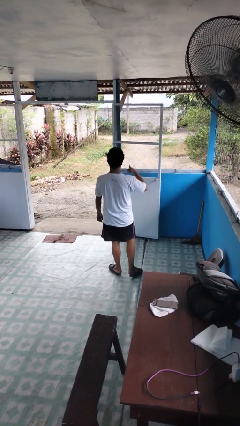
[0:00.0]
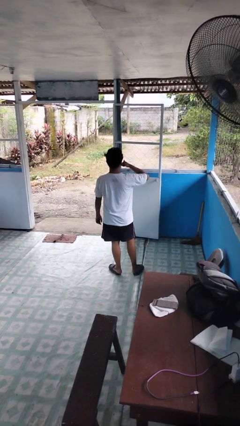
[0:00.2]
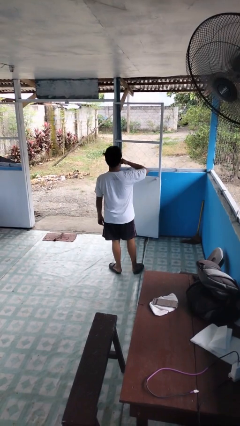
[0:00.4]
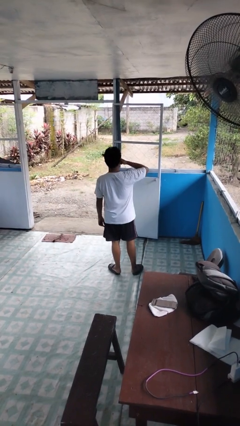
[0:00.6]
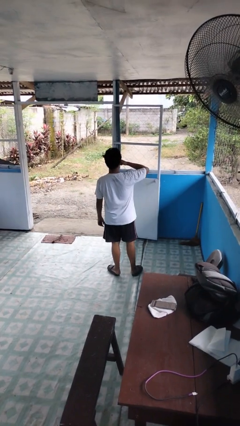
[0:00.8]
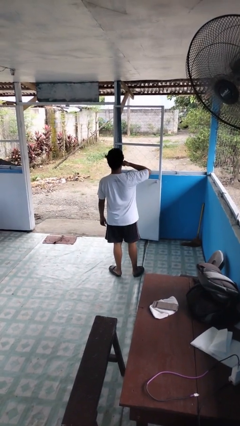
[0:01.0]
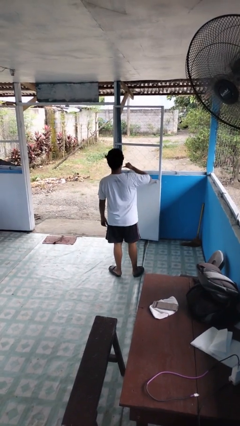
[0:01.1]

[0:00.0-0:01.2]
person gestures call me

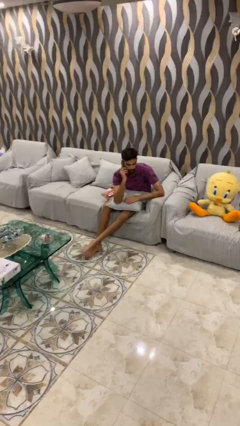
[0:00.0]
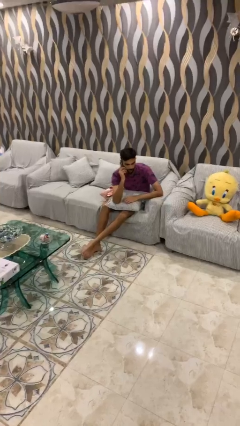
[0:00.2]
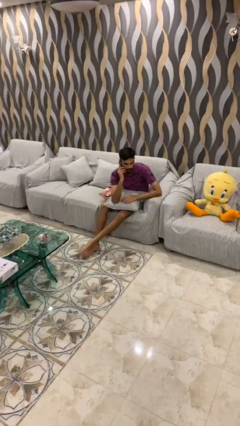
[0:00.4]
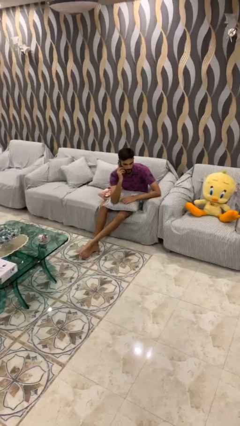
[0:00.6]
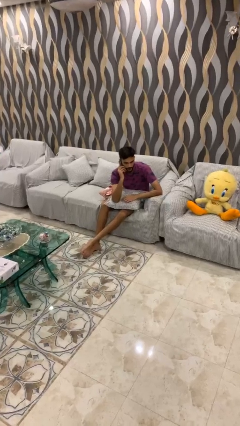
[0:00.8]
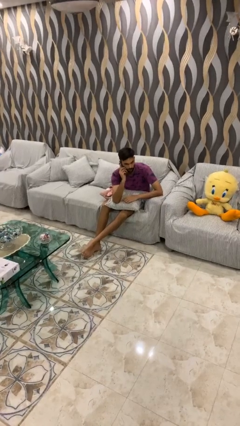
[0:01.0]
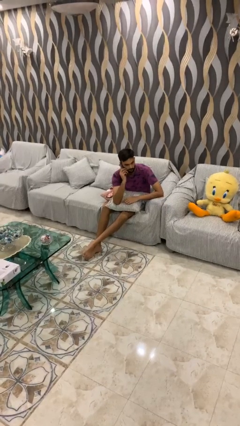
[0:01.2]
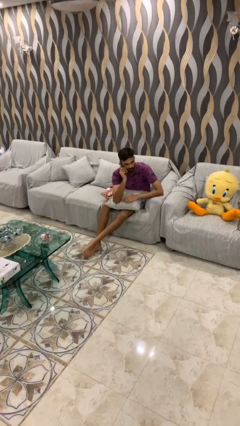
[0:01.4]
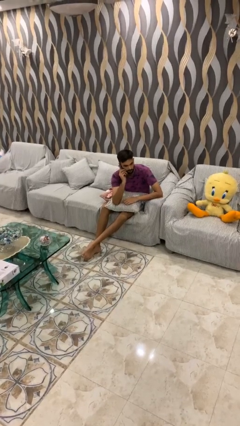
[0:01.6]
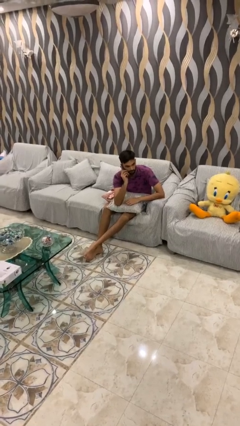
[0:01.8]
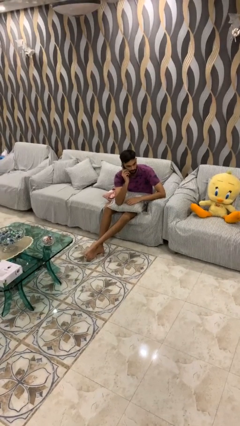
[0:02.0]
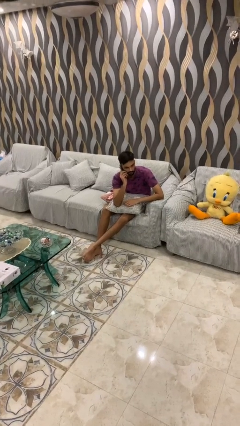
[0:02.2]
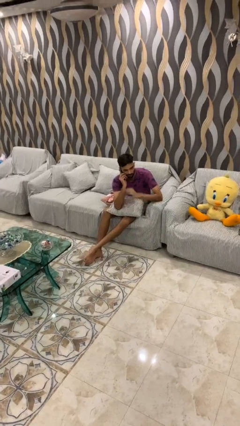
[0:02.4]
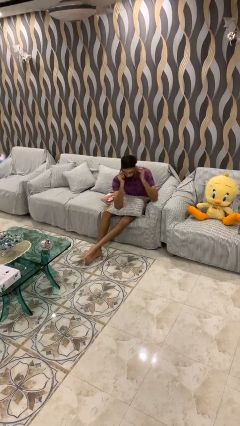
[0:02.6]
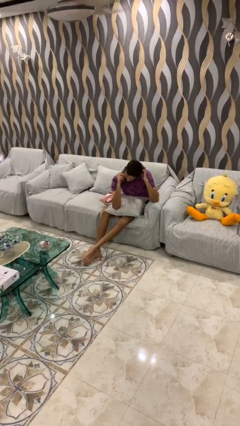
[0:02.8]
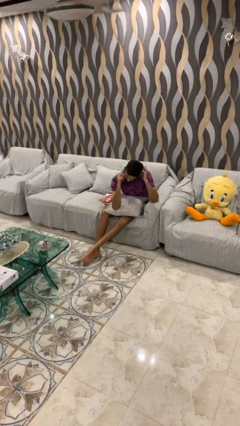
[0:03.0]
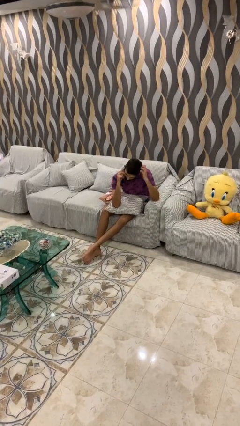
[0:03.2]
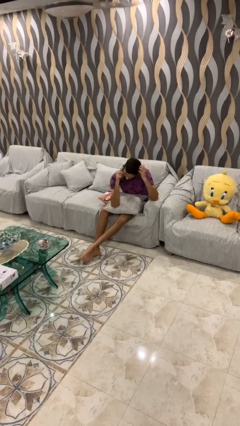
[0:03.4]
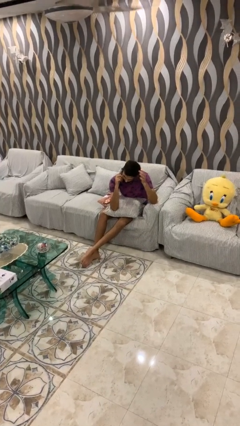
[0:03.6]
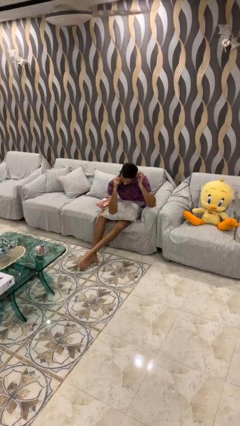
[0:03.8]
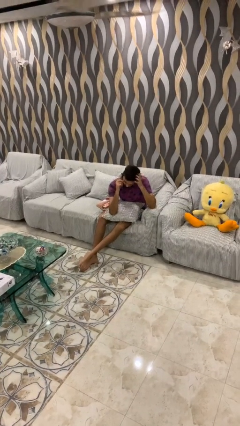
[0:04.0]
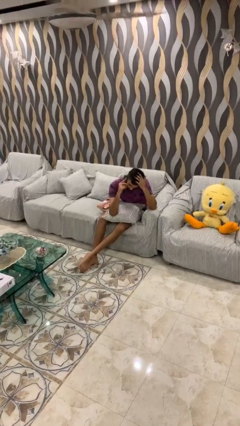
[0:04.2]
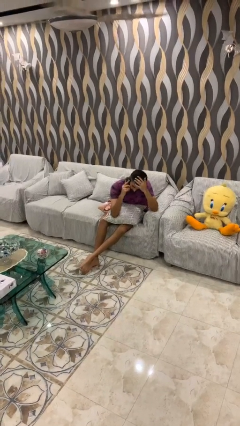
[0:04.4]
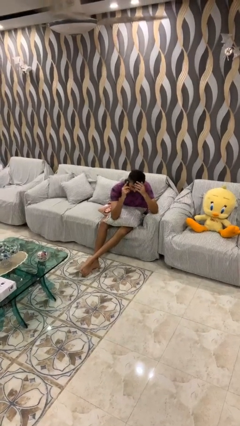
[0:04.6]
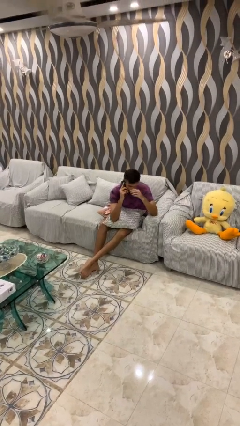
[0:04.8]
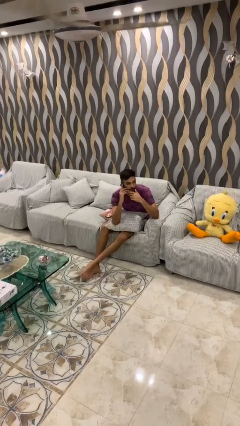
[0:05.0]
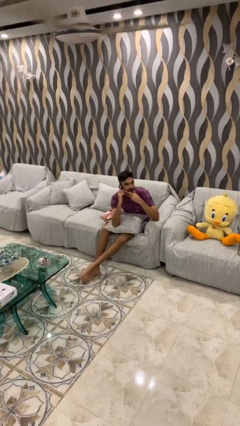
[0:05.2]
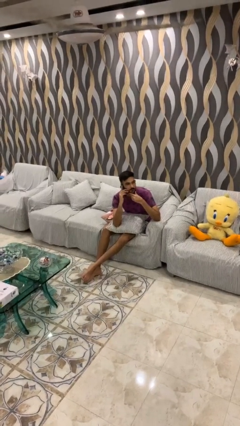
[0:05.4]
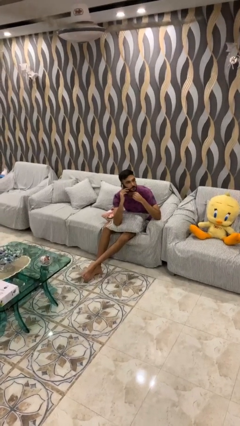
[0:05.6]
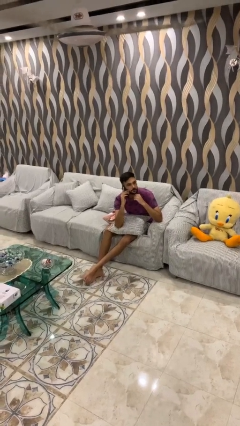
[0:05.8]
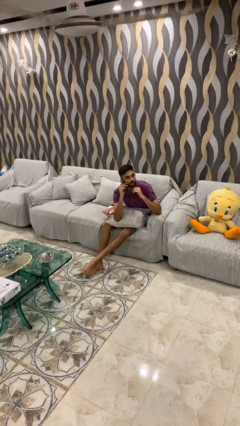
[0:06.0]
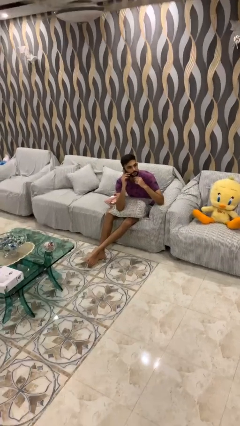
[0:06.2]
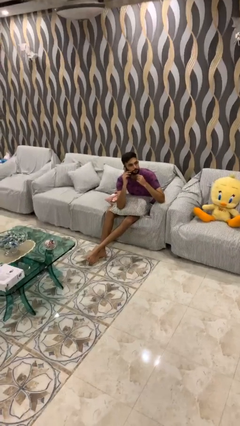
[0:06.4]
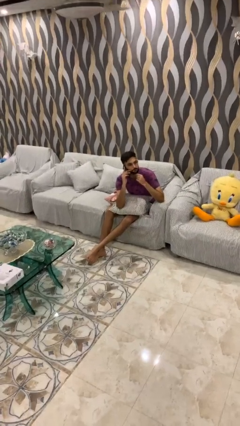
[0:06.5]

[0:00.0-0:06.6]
person talks on phone

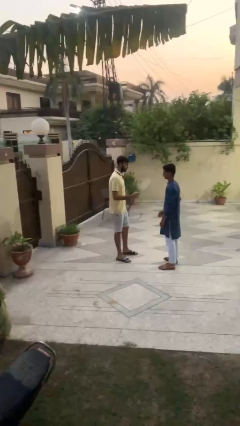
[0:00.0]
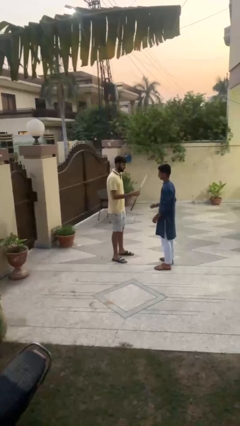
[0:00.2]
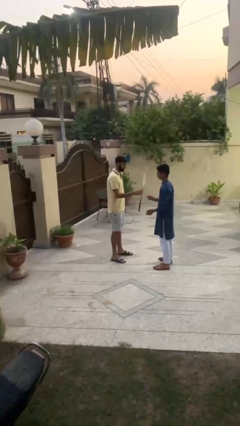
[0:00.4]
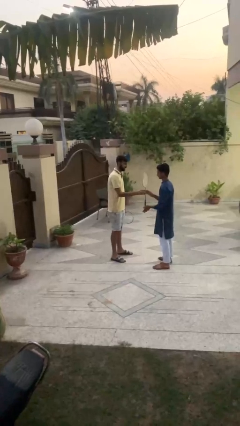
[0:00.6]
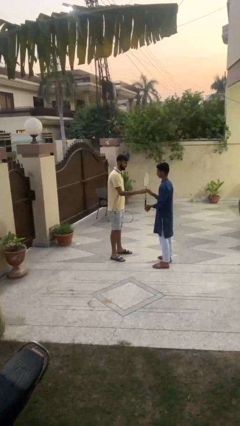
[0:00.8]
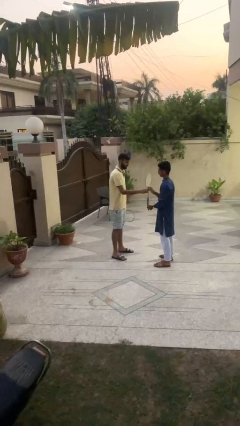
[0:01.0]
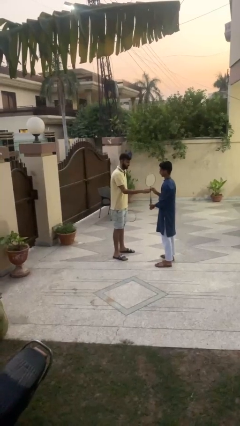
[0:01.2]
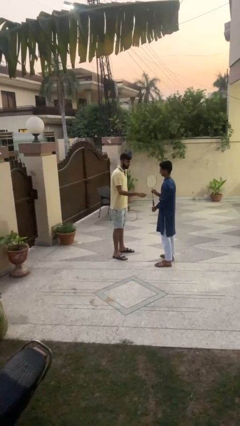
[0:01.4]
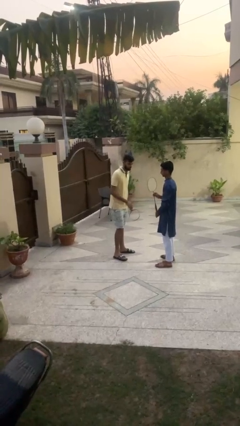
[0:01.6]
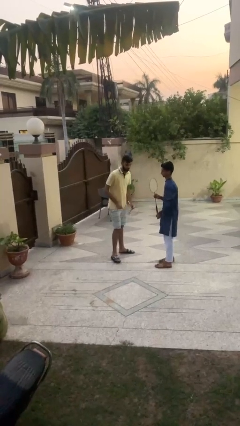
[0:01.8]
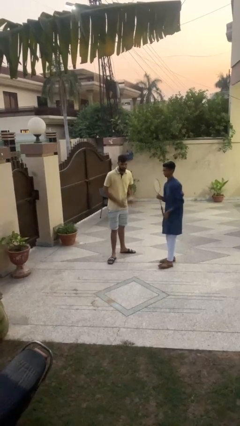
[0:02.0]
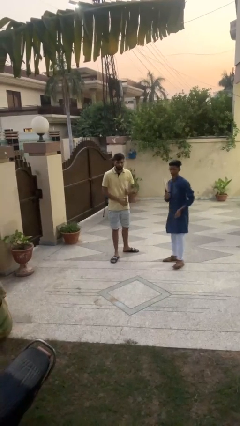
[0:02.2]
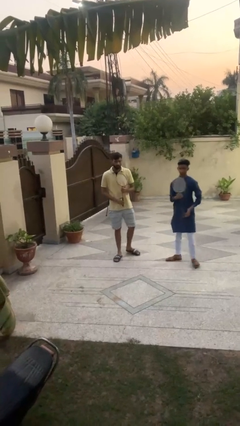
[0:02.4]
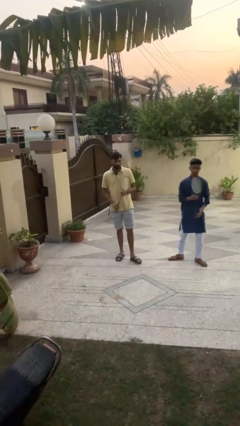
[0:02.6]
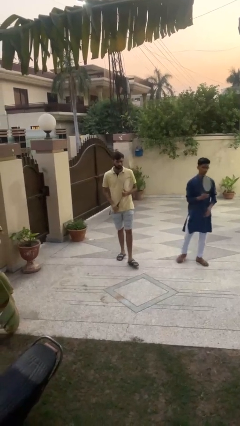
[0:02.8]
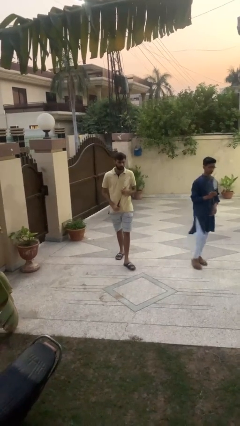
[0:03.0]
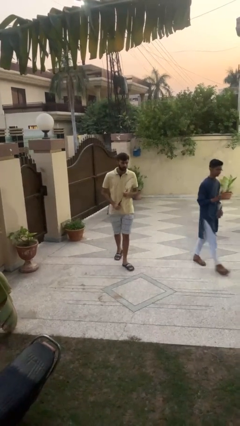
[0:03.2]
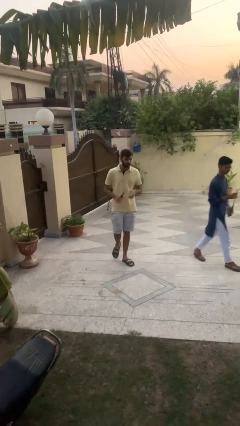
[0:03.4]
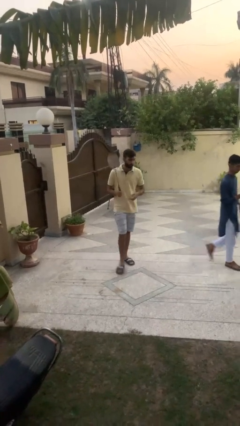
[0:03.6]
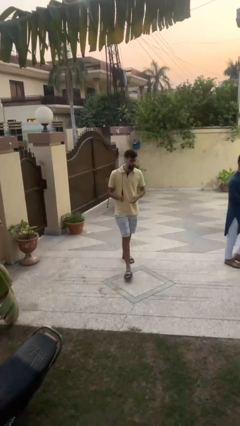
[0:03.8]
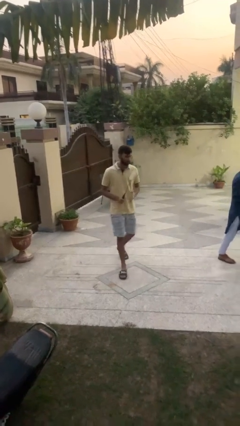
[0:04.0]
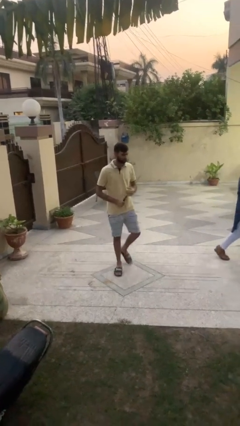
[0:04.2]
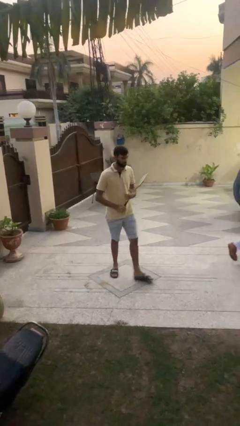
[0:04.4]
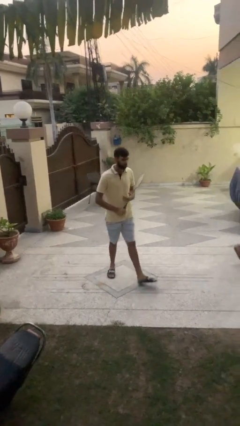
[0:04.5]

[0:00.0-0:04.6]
person transfers object to person

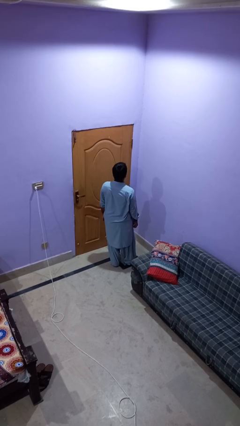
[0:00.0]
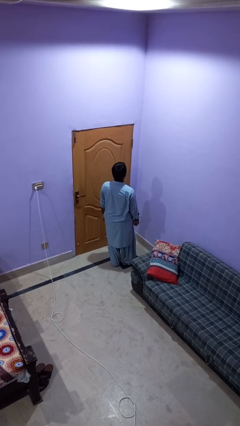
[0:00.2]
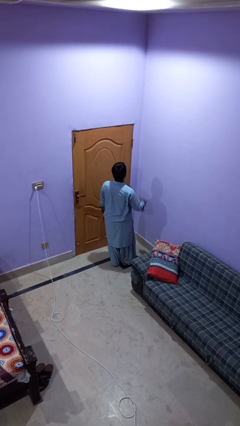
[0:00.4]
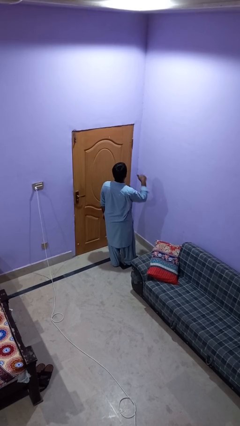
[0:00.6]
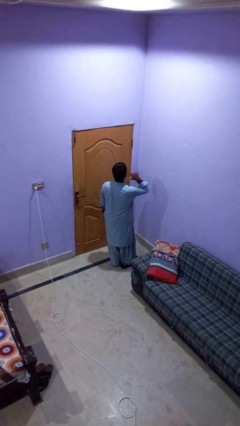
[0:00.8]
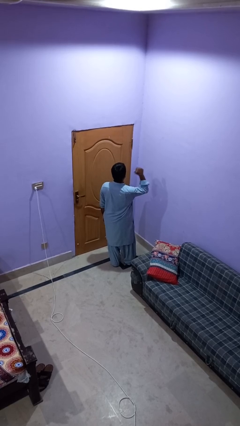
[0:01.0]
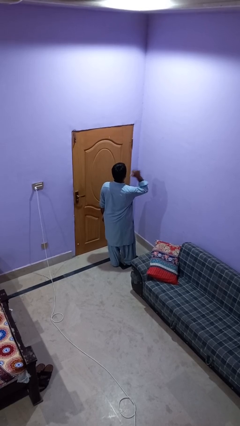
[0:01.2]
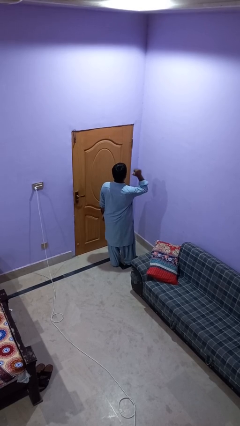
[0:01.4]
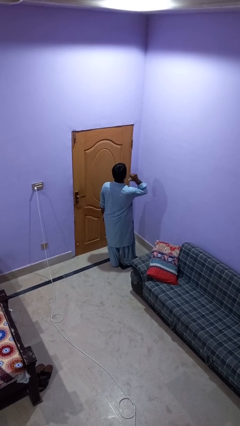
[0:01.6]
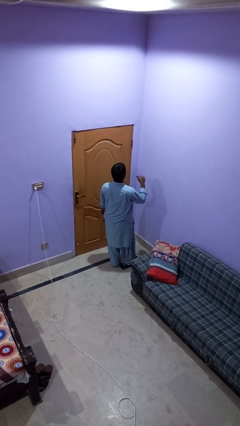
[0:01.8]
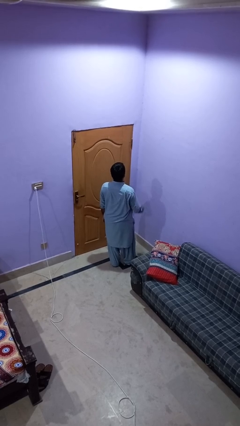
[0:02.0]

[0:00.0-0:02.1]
person gestures behind me

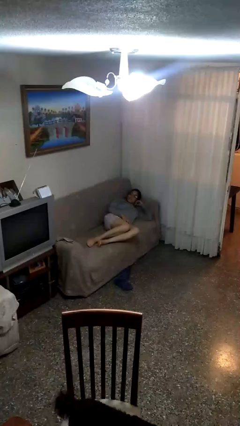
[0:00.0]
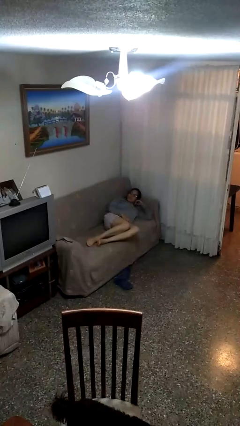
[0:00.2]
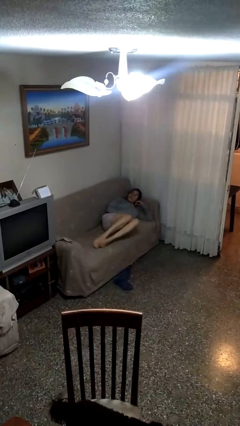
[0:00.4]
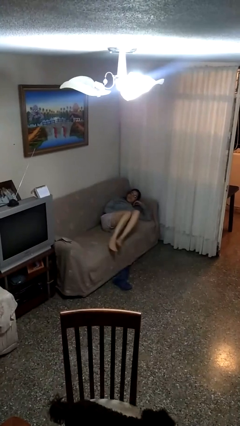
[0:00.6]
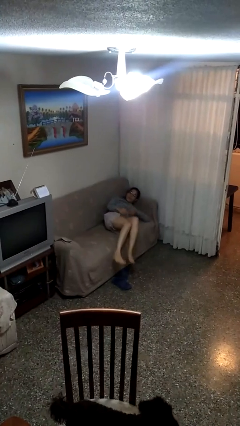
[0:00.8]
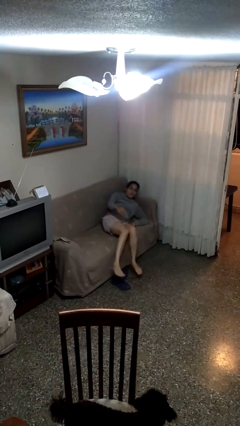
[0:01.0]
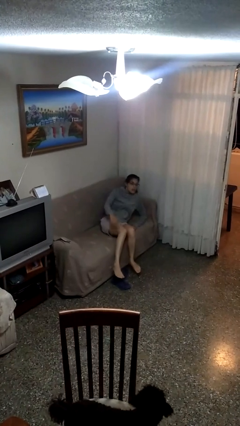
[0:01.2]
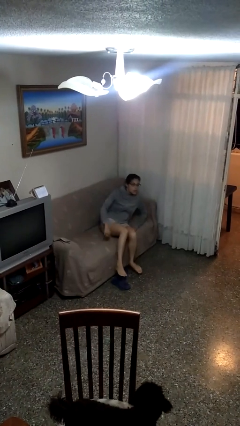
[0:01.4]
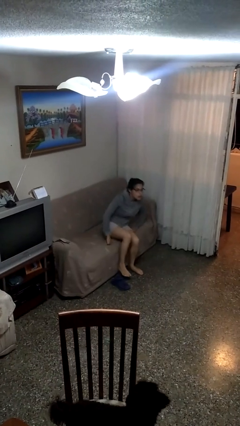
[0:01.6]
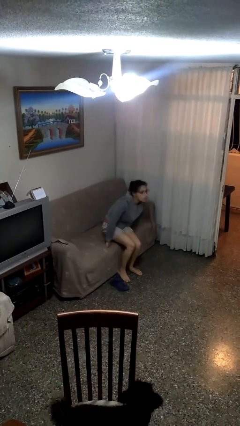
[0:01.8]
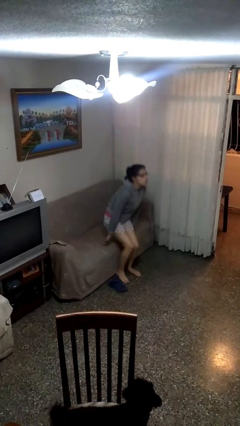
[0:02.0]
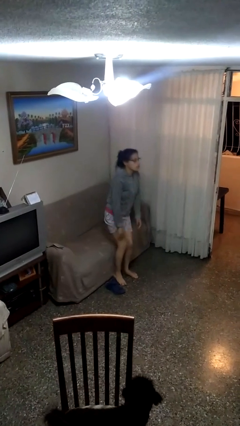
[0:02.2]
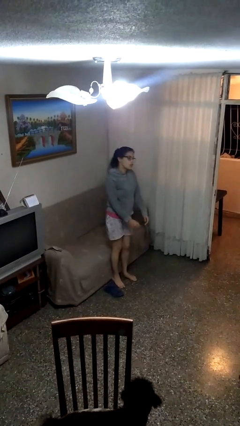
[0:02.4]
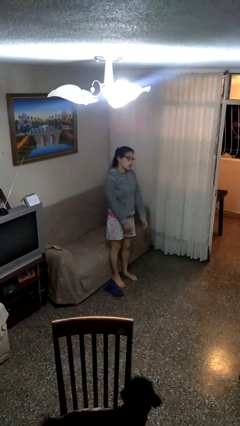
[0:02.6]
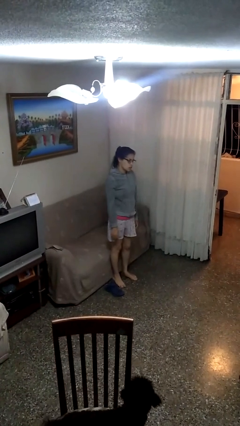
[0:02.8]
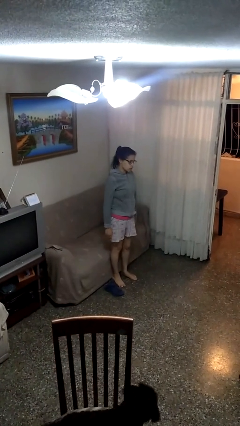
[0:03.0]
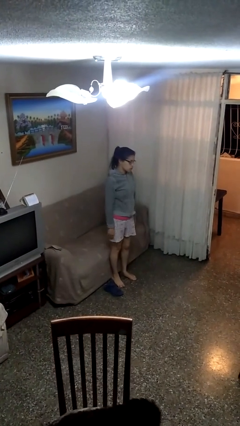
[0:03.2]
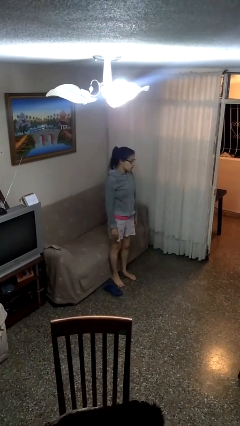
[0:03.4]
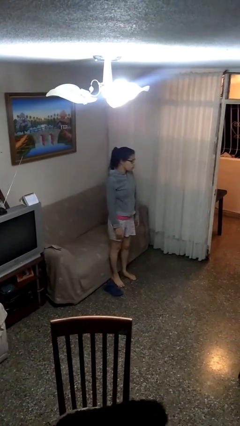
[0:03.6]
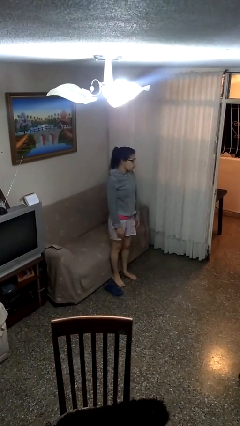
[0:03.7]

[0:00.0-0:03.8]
person stands up
